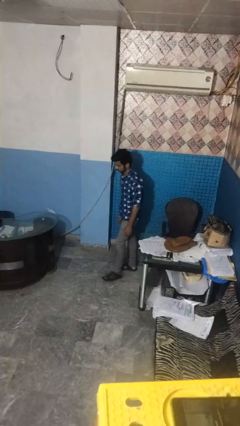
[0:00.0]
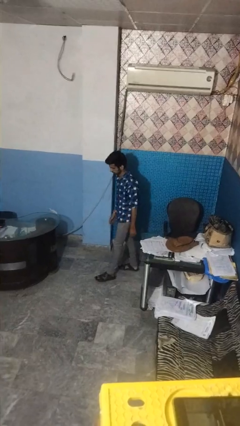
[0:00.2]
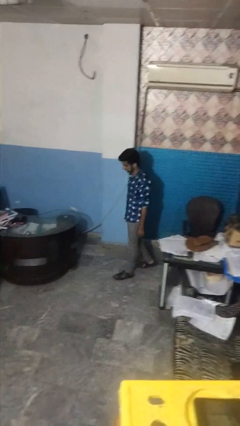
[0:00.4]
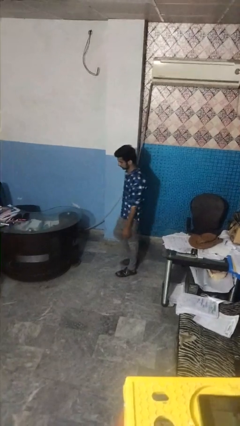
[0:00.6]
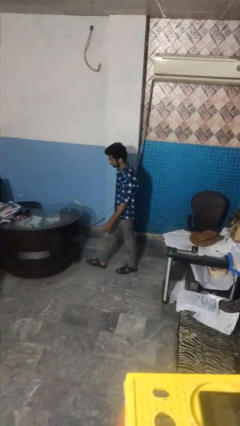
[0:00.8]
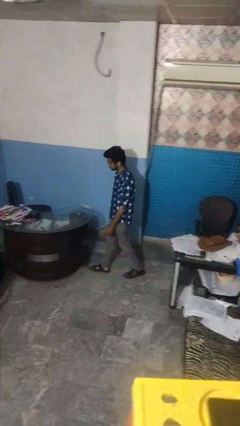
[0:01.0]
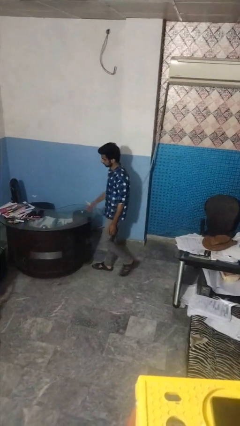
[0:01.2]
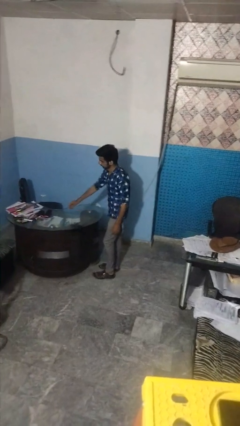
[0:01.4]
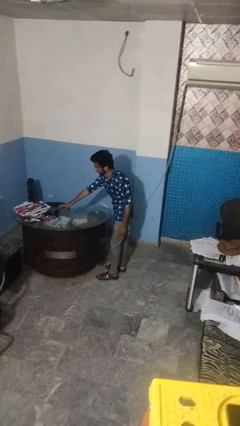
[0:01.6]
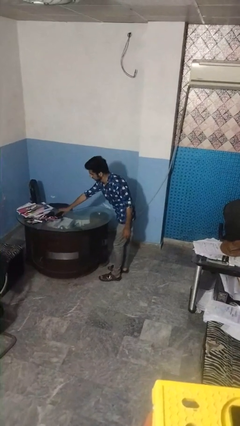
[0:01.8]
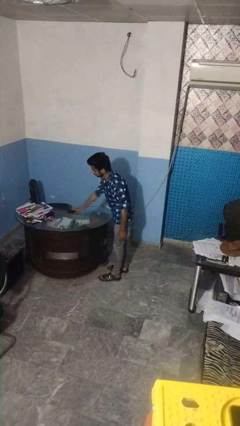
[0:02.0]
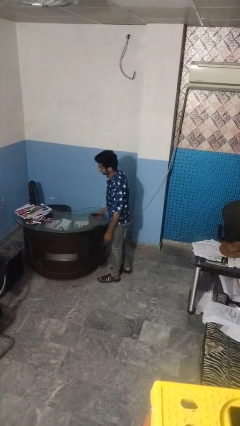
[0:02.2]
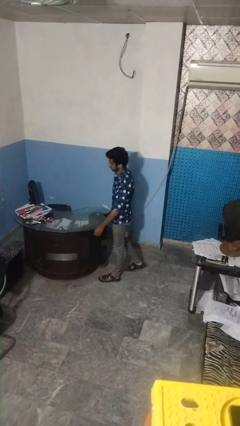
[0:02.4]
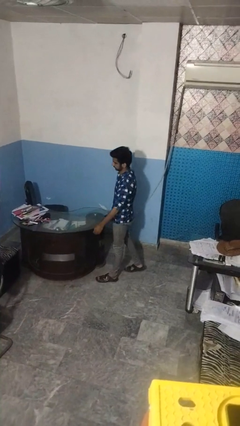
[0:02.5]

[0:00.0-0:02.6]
person picks up object from table

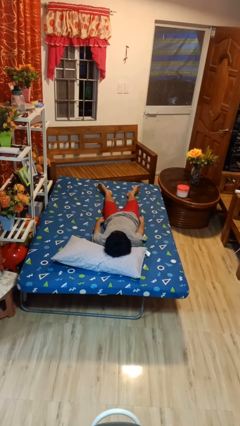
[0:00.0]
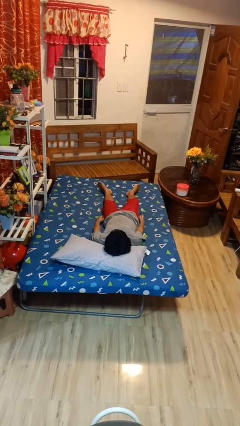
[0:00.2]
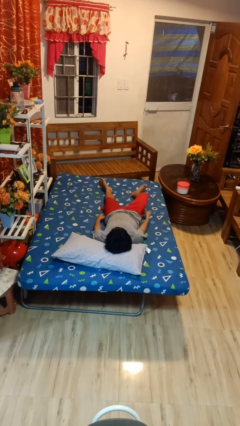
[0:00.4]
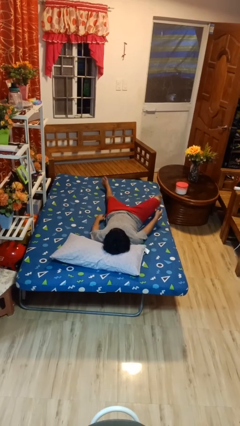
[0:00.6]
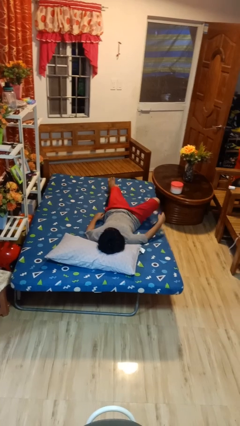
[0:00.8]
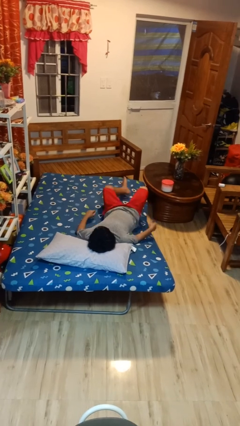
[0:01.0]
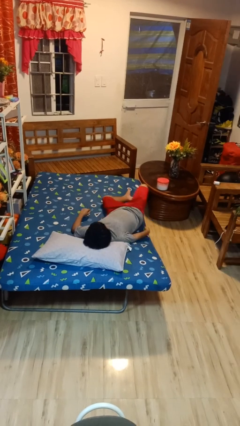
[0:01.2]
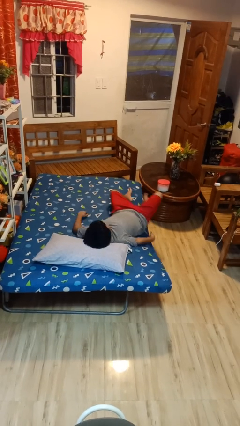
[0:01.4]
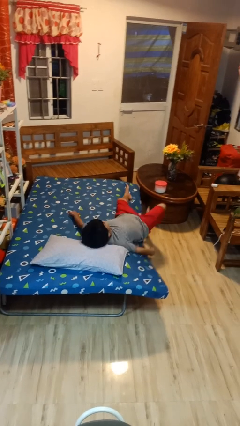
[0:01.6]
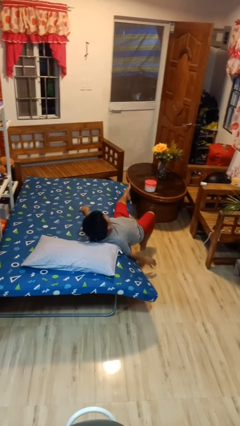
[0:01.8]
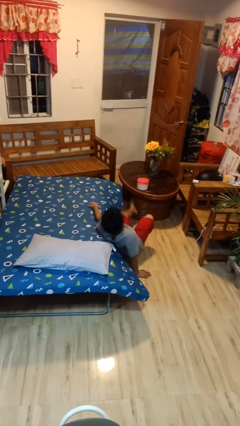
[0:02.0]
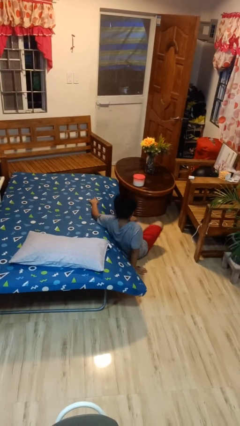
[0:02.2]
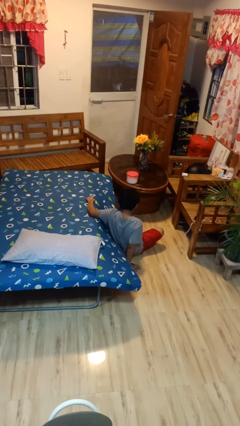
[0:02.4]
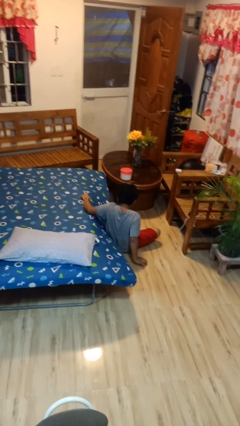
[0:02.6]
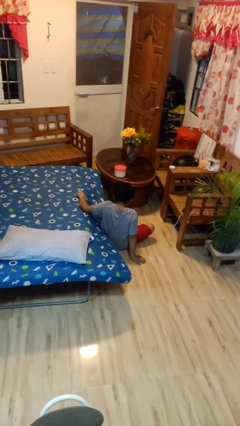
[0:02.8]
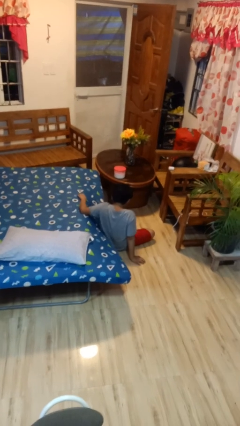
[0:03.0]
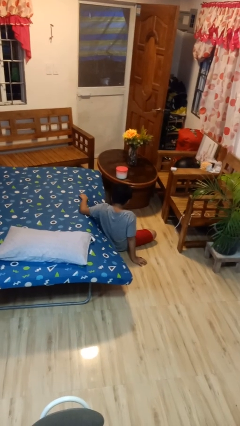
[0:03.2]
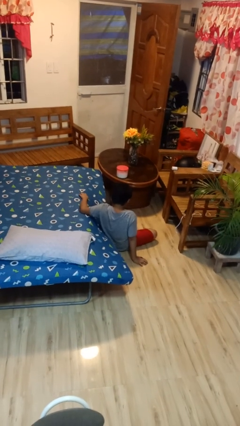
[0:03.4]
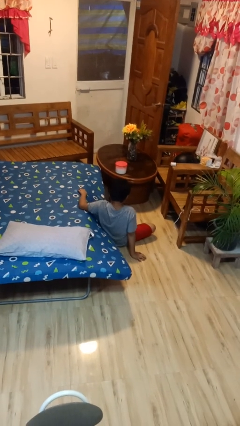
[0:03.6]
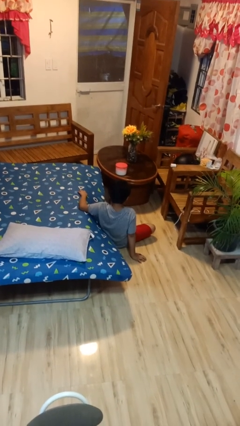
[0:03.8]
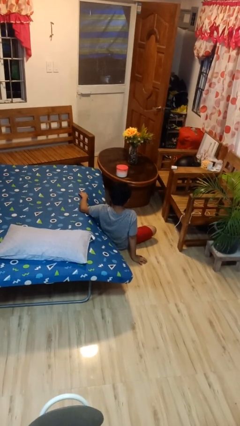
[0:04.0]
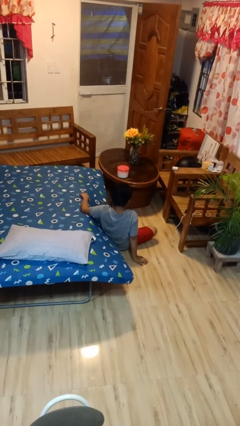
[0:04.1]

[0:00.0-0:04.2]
person falls from bed

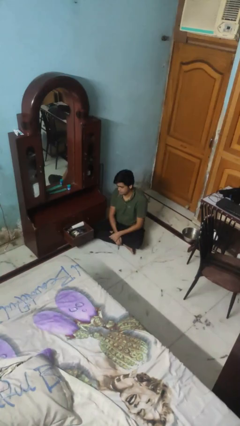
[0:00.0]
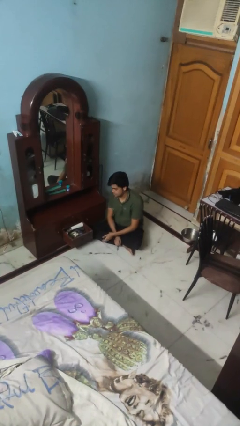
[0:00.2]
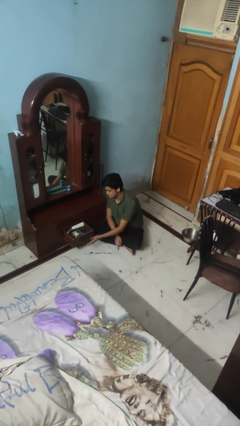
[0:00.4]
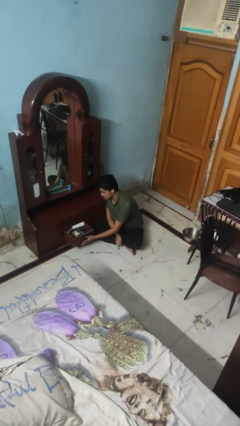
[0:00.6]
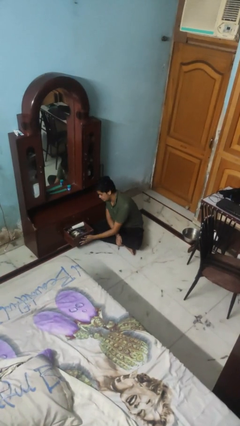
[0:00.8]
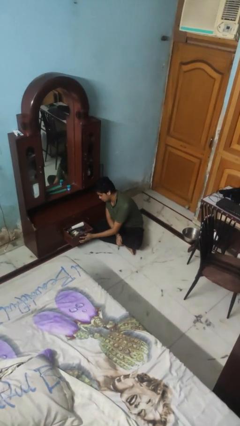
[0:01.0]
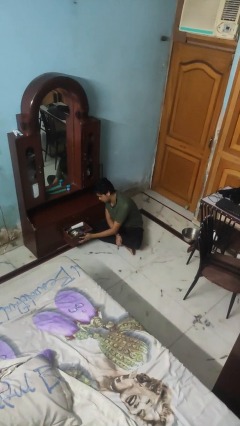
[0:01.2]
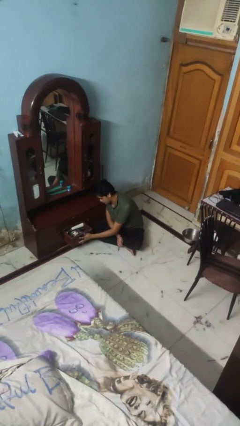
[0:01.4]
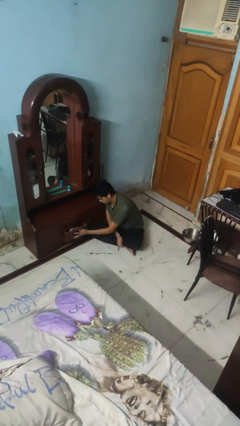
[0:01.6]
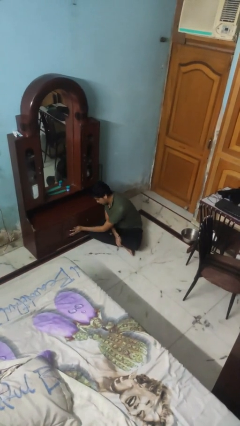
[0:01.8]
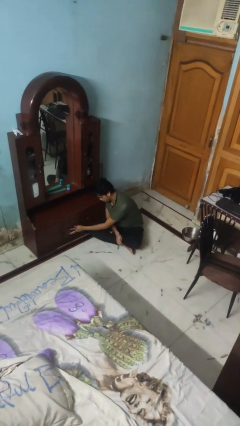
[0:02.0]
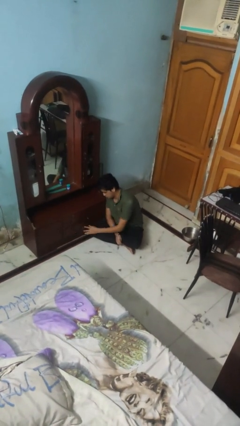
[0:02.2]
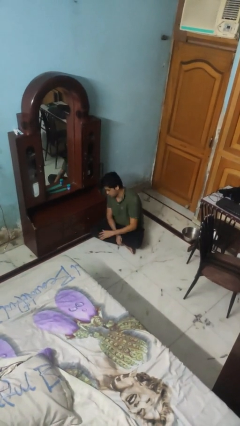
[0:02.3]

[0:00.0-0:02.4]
person closes dresser drawer

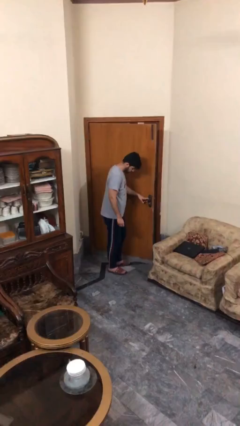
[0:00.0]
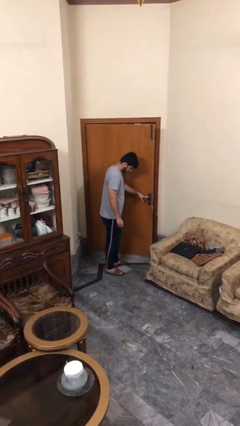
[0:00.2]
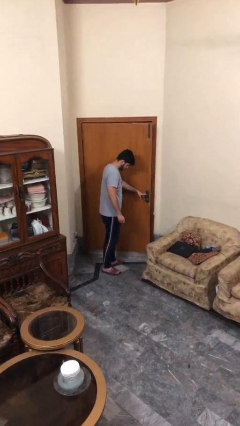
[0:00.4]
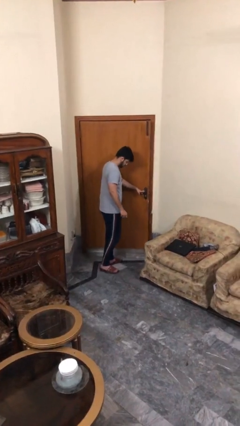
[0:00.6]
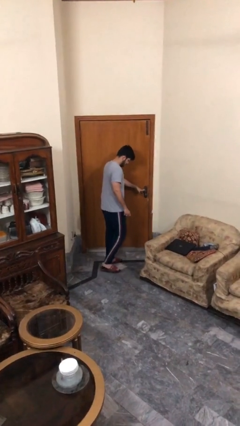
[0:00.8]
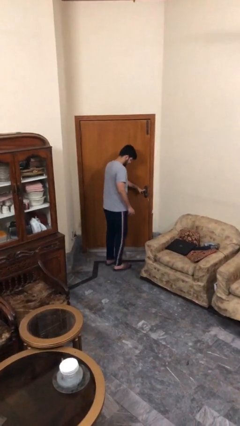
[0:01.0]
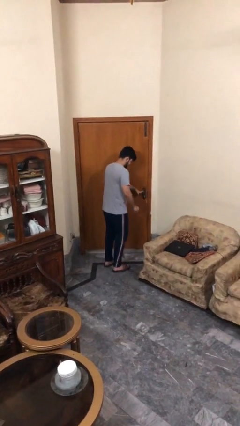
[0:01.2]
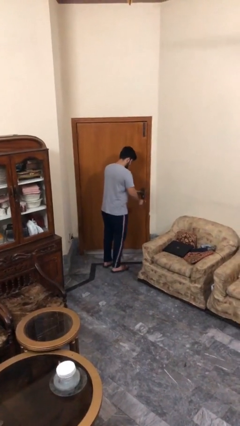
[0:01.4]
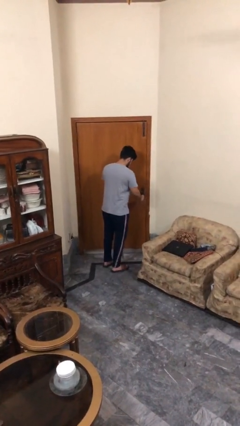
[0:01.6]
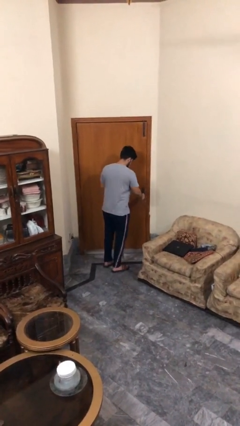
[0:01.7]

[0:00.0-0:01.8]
person closes facility door

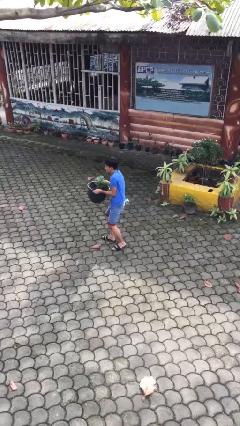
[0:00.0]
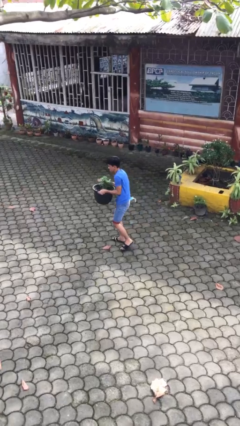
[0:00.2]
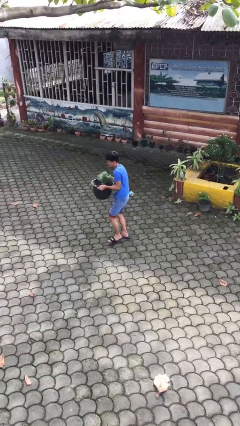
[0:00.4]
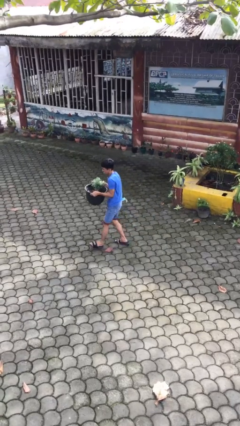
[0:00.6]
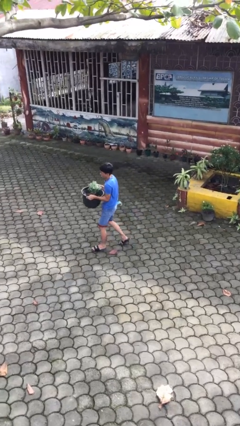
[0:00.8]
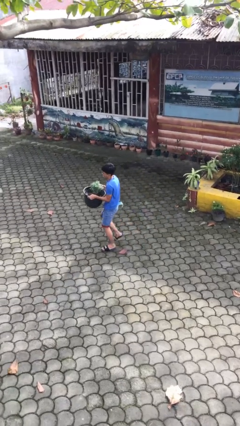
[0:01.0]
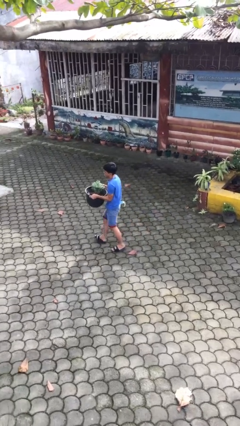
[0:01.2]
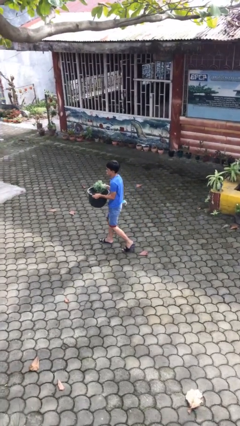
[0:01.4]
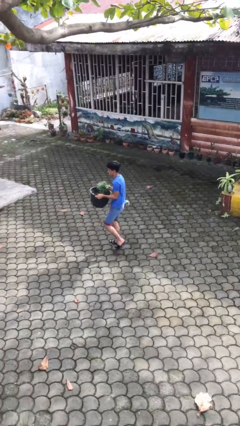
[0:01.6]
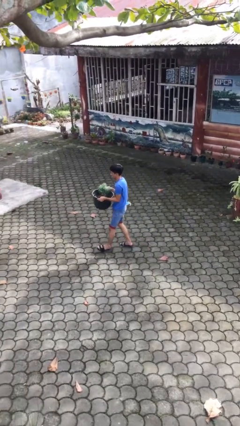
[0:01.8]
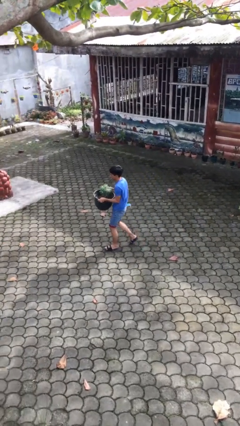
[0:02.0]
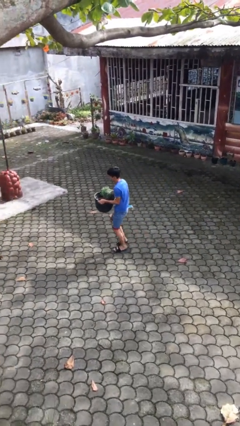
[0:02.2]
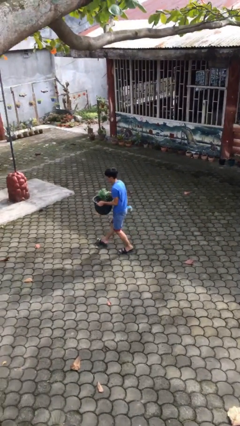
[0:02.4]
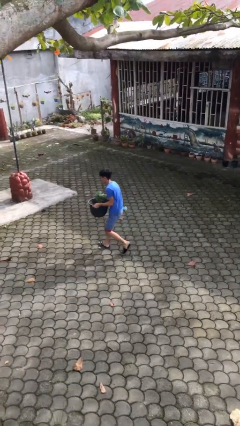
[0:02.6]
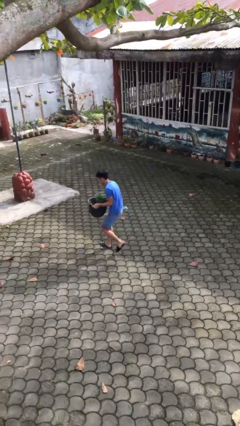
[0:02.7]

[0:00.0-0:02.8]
person carries heavy object

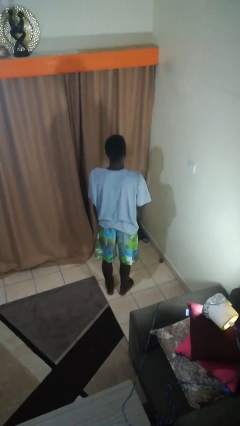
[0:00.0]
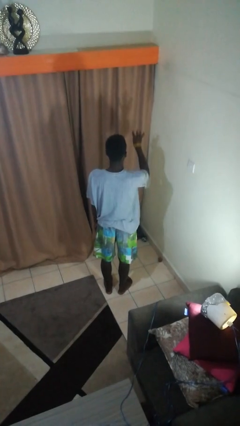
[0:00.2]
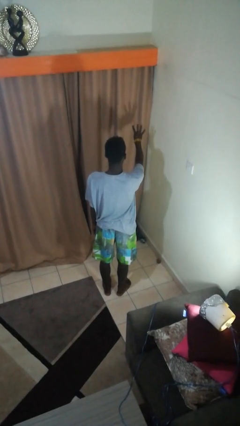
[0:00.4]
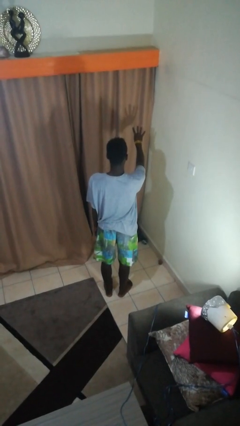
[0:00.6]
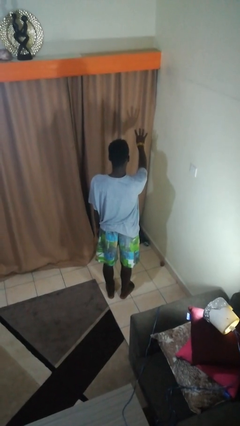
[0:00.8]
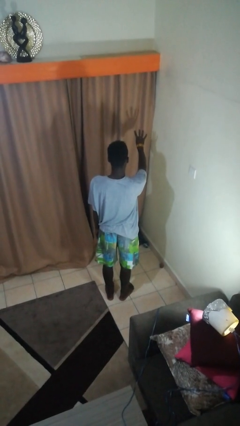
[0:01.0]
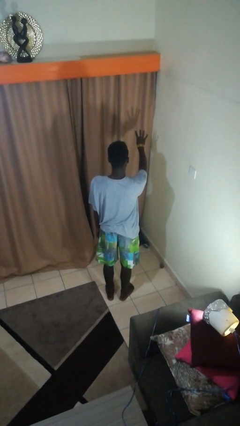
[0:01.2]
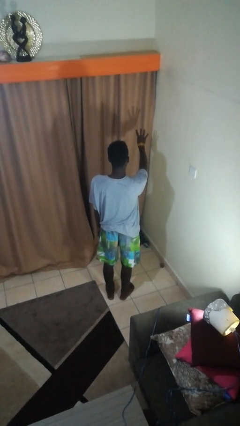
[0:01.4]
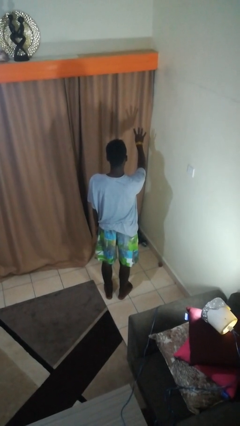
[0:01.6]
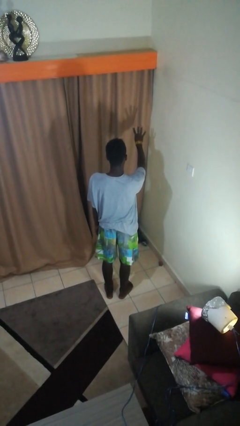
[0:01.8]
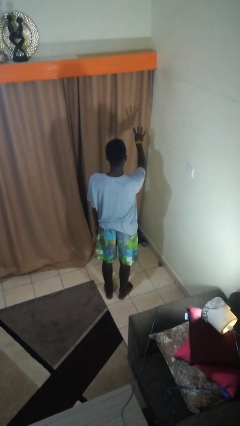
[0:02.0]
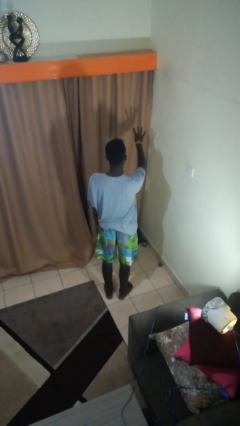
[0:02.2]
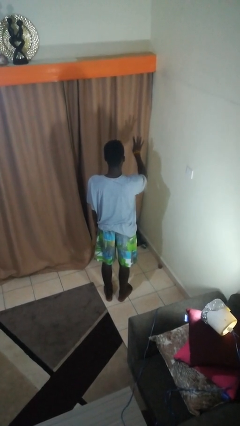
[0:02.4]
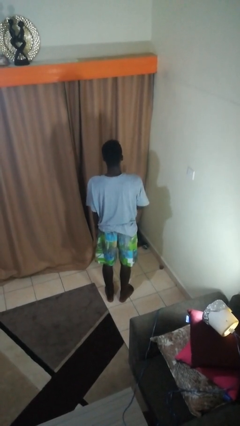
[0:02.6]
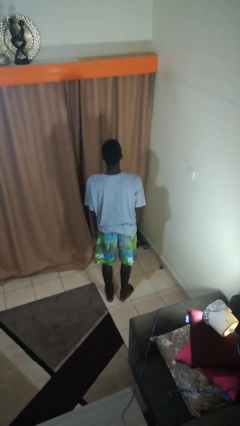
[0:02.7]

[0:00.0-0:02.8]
person gestures number four

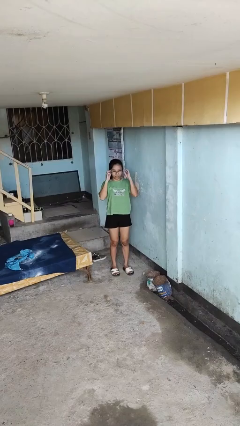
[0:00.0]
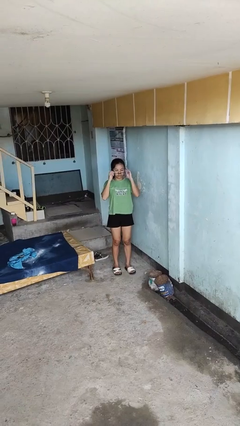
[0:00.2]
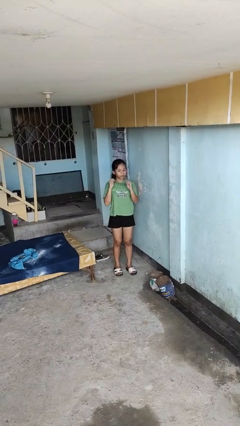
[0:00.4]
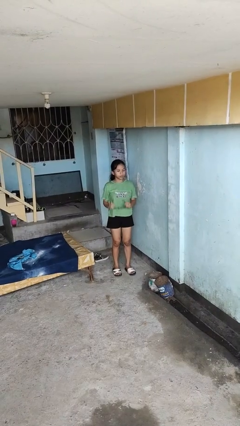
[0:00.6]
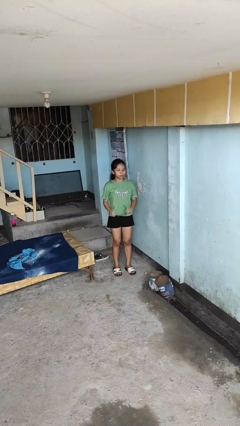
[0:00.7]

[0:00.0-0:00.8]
person takes off glasses
